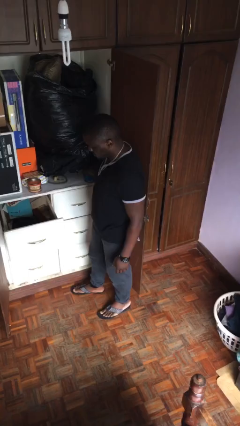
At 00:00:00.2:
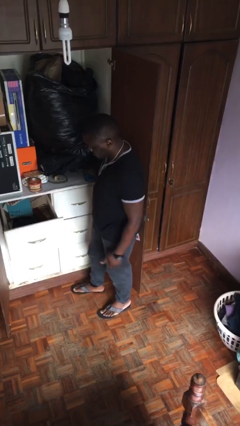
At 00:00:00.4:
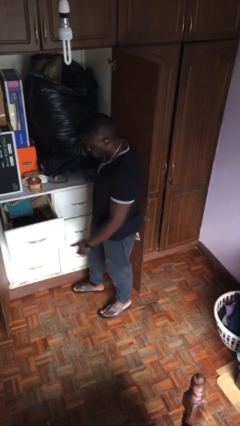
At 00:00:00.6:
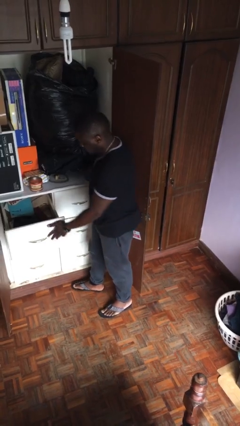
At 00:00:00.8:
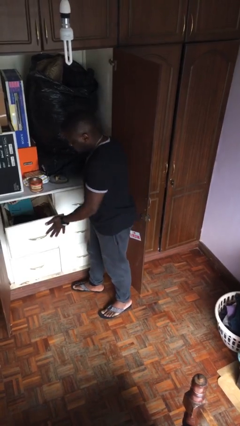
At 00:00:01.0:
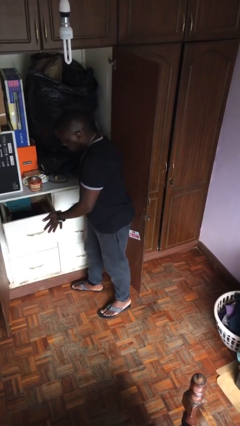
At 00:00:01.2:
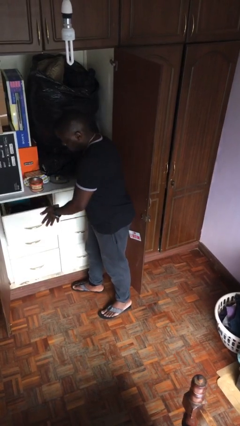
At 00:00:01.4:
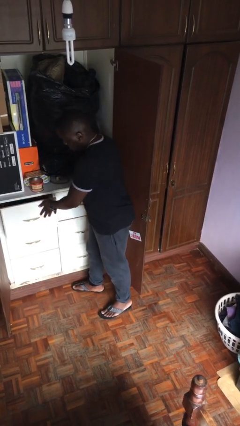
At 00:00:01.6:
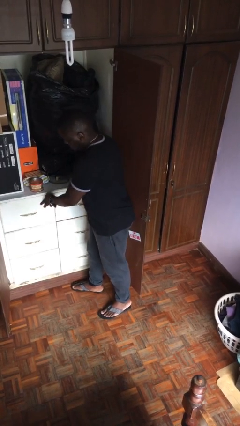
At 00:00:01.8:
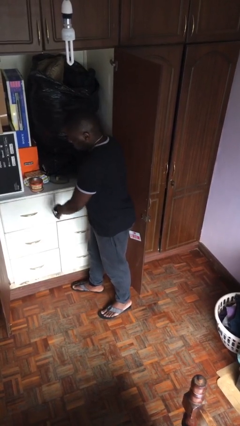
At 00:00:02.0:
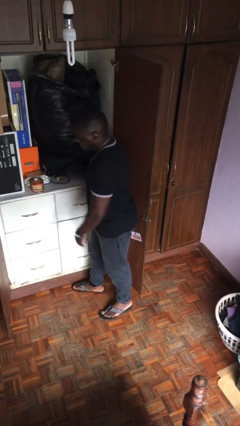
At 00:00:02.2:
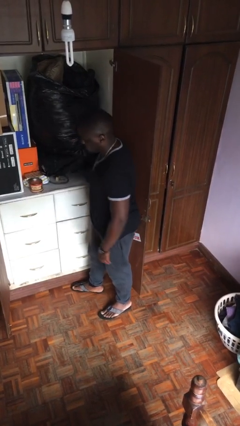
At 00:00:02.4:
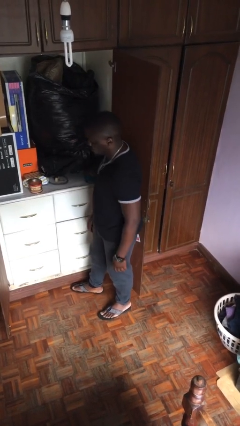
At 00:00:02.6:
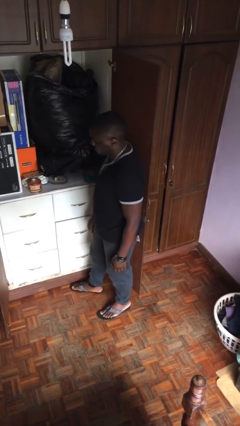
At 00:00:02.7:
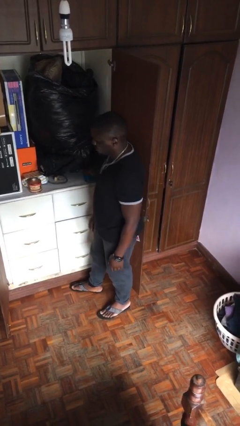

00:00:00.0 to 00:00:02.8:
person closes dresser drawer

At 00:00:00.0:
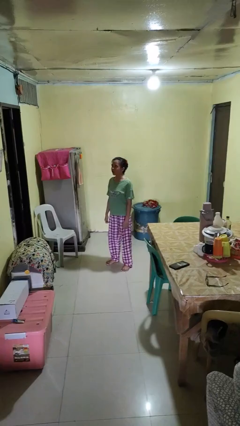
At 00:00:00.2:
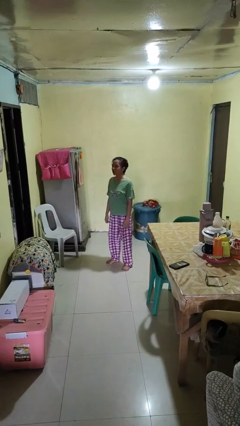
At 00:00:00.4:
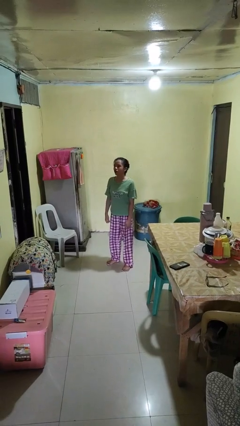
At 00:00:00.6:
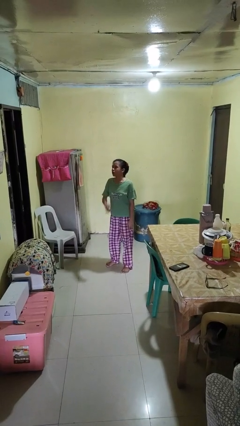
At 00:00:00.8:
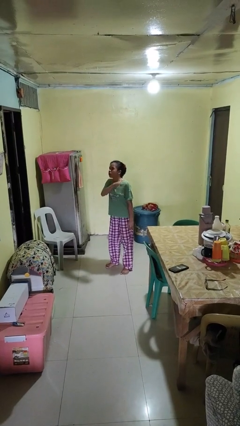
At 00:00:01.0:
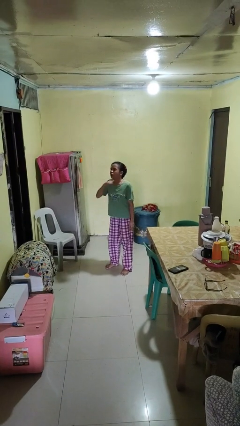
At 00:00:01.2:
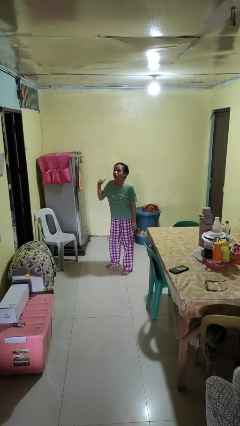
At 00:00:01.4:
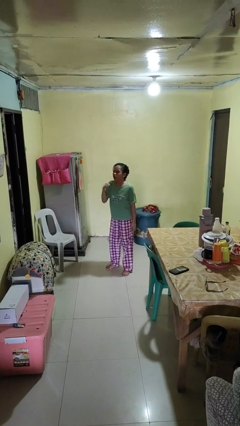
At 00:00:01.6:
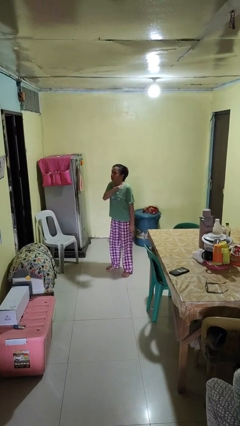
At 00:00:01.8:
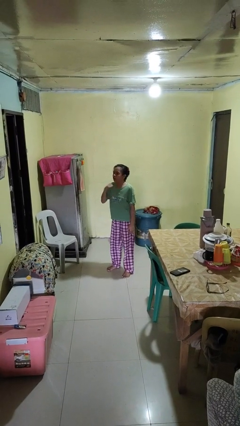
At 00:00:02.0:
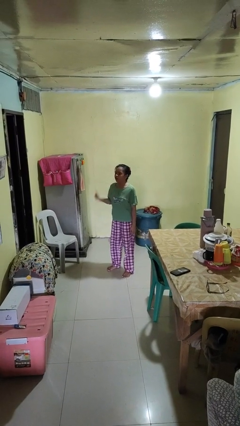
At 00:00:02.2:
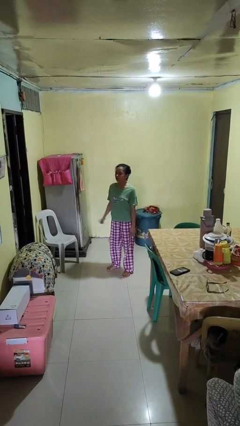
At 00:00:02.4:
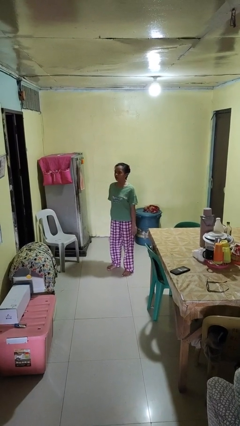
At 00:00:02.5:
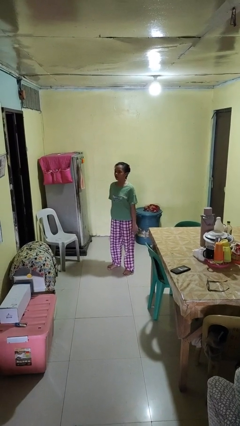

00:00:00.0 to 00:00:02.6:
person gestures cut

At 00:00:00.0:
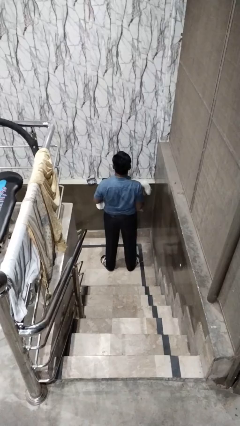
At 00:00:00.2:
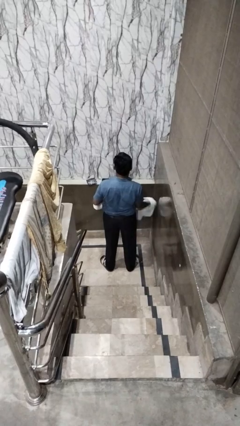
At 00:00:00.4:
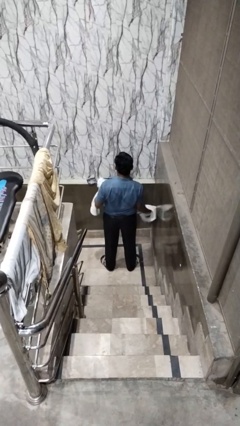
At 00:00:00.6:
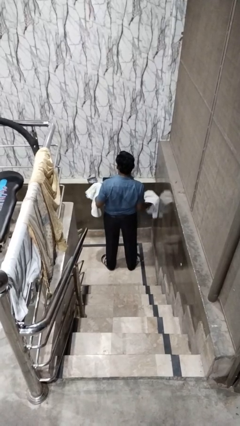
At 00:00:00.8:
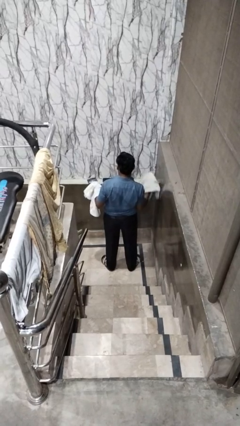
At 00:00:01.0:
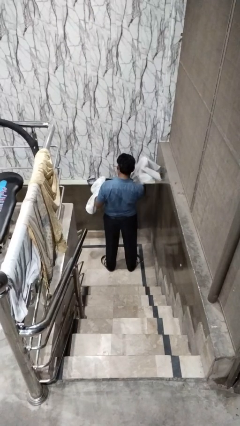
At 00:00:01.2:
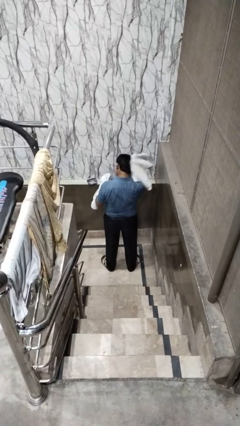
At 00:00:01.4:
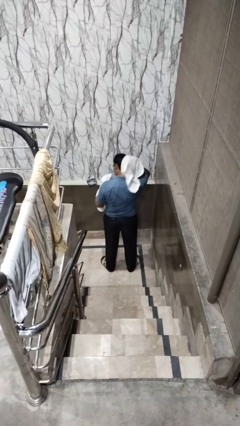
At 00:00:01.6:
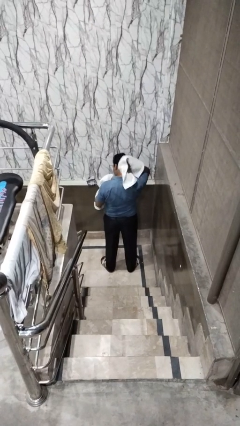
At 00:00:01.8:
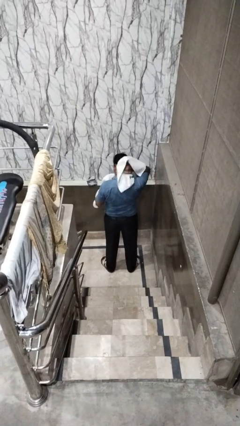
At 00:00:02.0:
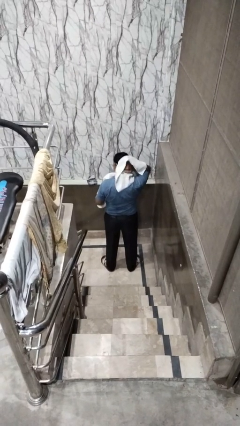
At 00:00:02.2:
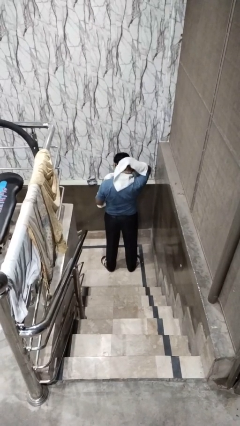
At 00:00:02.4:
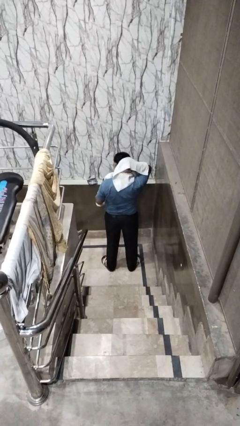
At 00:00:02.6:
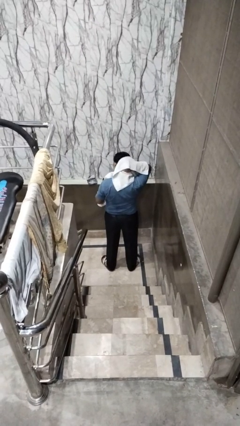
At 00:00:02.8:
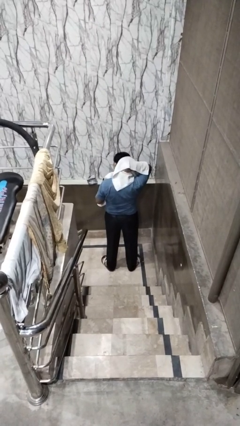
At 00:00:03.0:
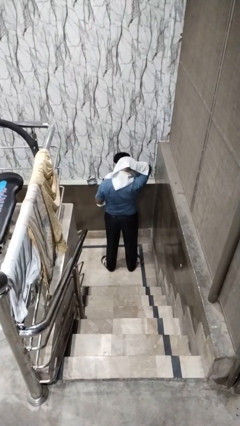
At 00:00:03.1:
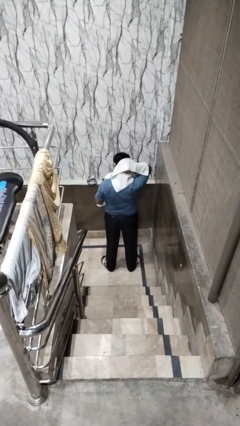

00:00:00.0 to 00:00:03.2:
person dries hair with towel

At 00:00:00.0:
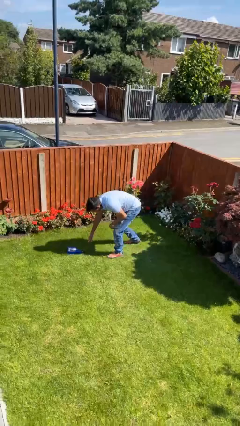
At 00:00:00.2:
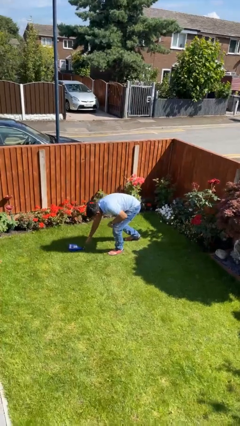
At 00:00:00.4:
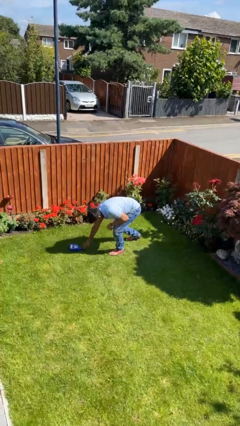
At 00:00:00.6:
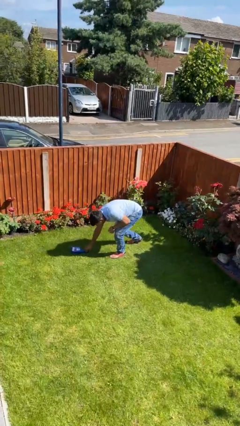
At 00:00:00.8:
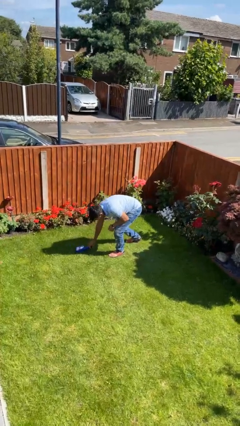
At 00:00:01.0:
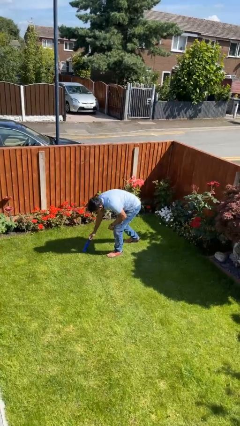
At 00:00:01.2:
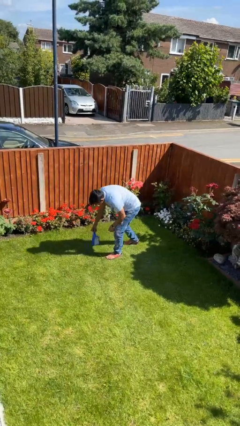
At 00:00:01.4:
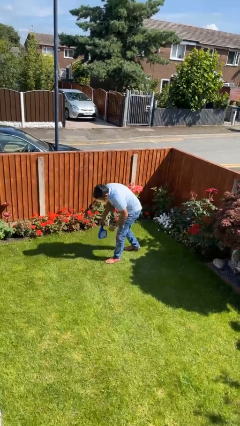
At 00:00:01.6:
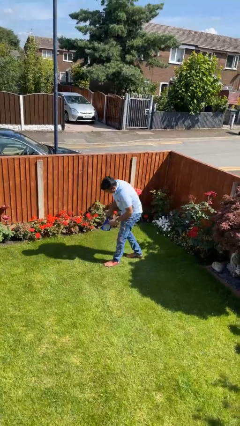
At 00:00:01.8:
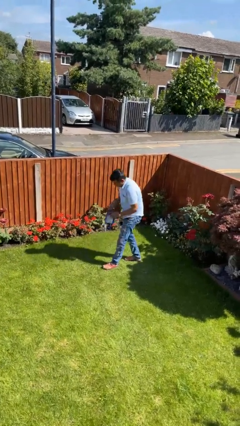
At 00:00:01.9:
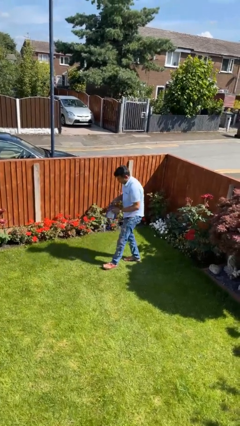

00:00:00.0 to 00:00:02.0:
person picks up object from floor

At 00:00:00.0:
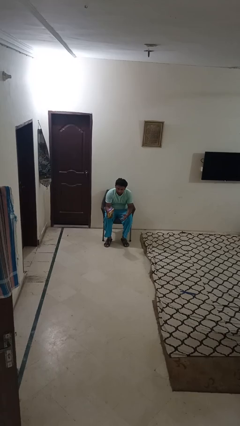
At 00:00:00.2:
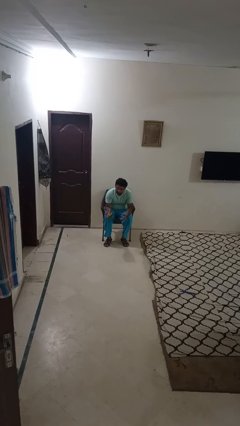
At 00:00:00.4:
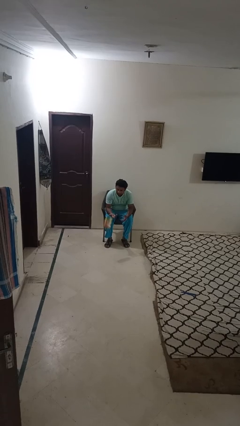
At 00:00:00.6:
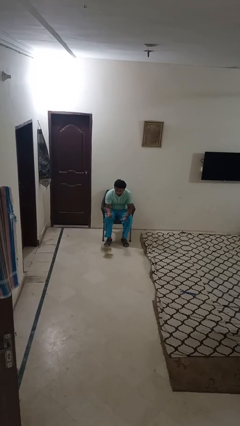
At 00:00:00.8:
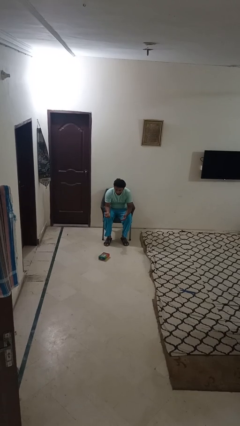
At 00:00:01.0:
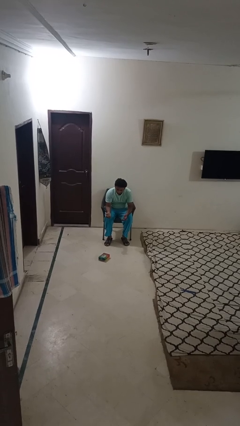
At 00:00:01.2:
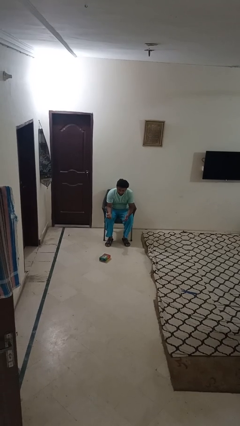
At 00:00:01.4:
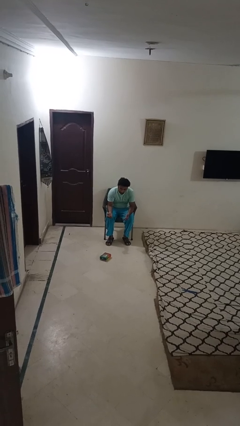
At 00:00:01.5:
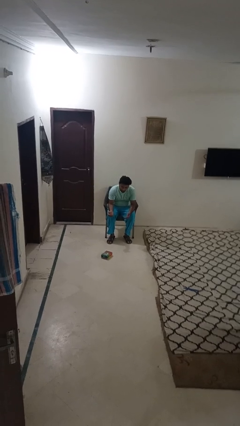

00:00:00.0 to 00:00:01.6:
person drops object

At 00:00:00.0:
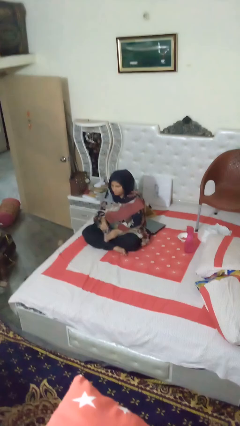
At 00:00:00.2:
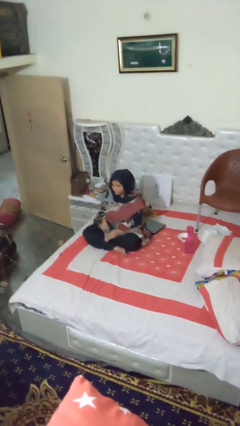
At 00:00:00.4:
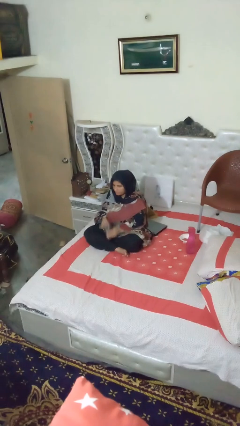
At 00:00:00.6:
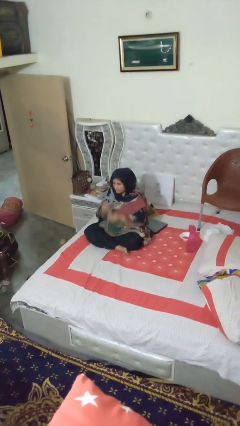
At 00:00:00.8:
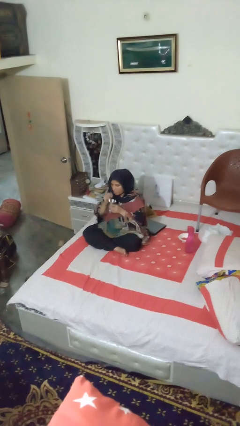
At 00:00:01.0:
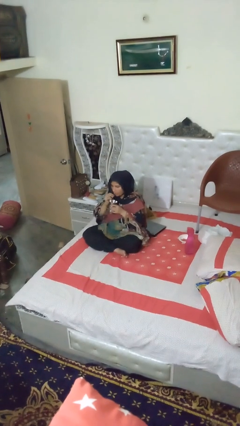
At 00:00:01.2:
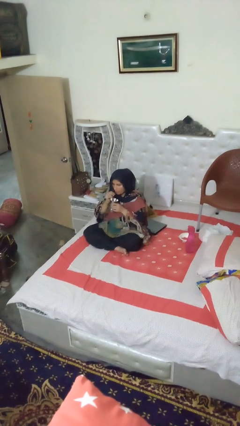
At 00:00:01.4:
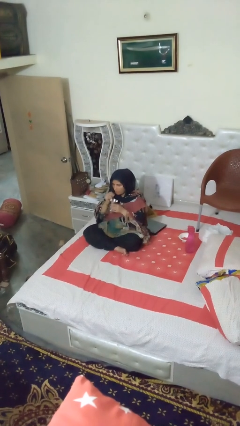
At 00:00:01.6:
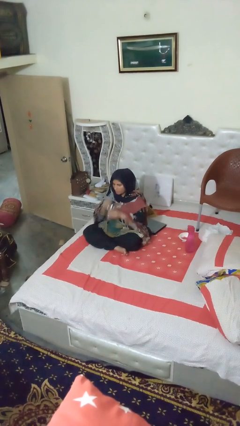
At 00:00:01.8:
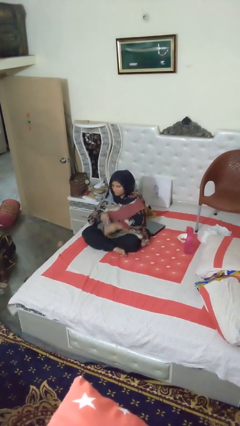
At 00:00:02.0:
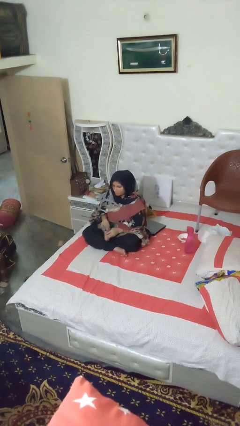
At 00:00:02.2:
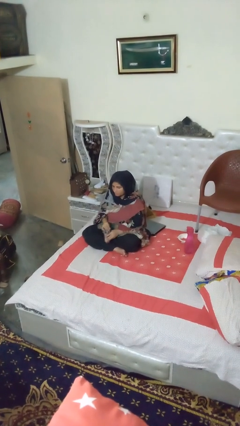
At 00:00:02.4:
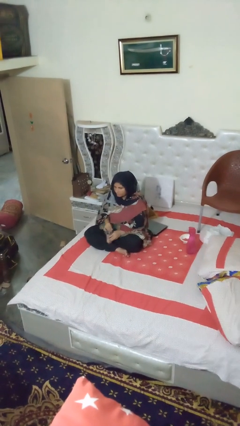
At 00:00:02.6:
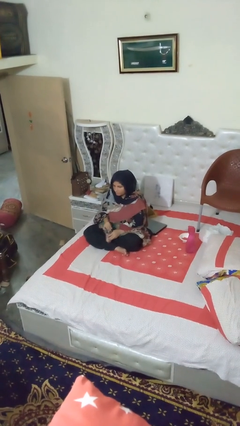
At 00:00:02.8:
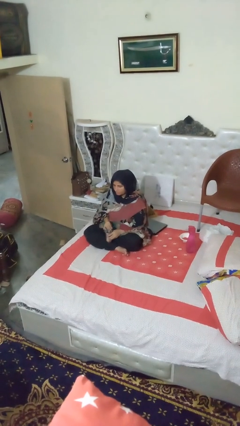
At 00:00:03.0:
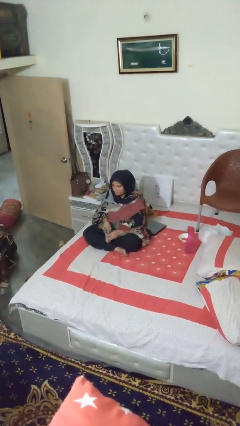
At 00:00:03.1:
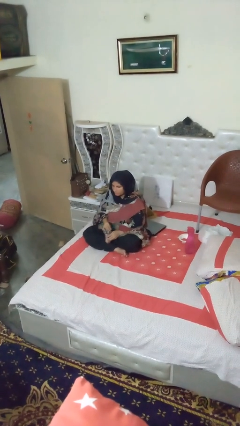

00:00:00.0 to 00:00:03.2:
person drinks from straw

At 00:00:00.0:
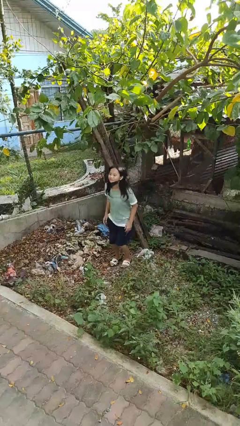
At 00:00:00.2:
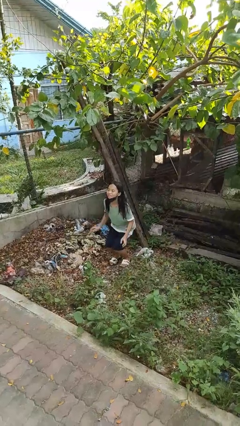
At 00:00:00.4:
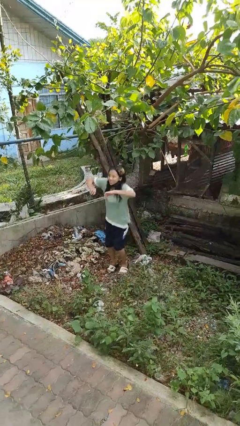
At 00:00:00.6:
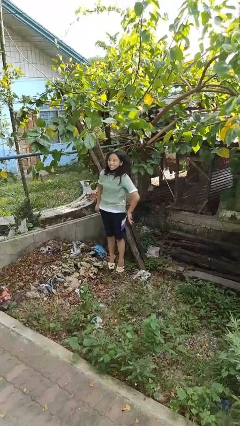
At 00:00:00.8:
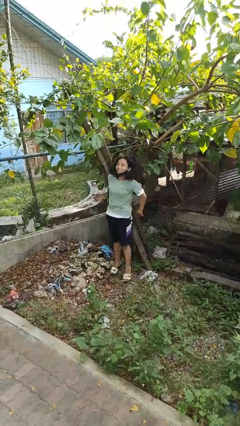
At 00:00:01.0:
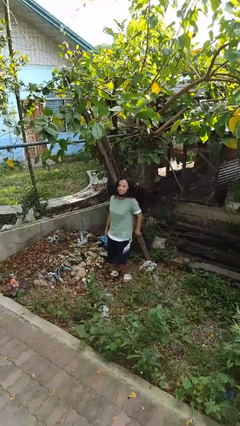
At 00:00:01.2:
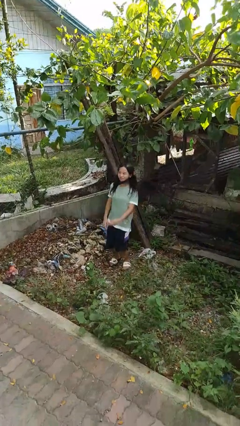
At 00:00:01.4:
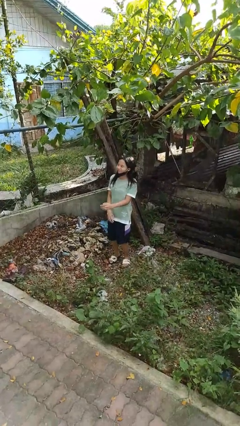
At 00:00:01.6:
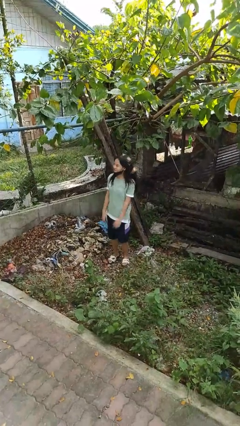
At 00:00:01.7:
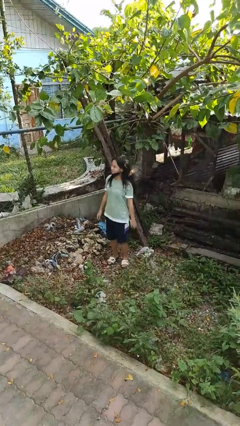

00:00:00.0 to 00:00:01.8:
person jumps
